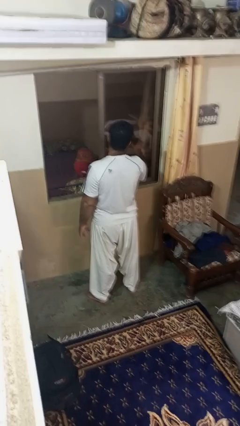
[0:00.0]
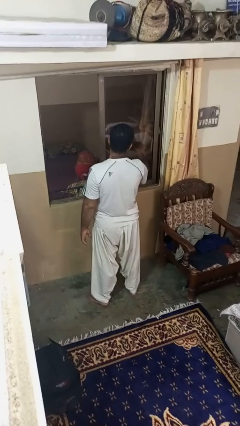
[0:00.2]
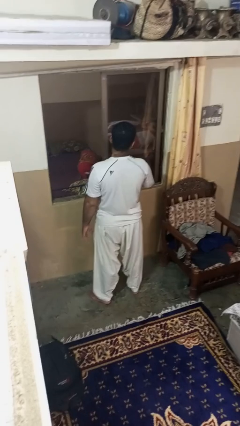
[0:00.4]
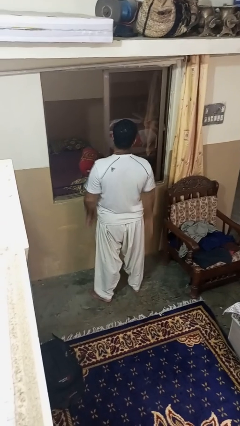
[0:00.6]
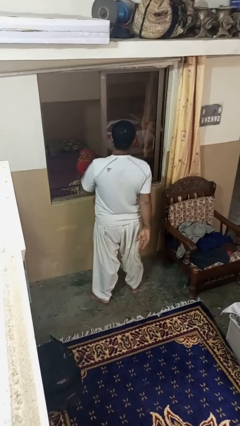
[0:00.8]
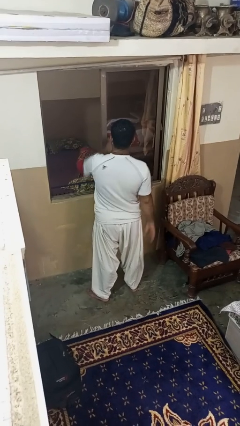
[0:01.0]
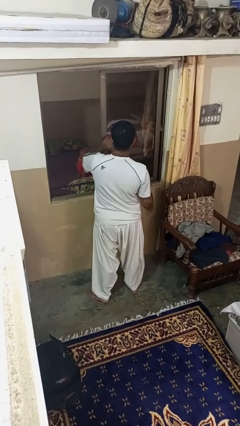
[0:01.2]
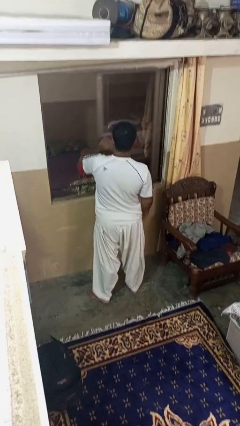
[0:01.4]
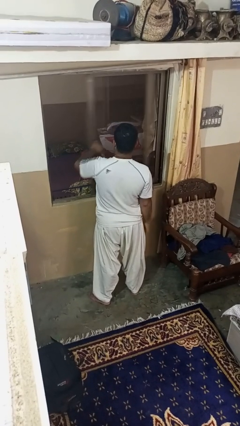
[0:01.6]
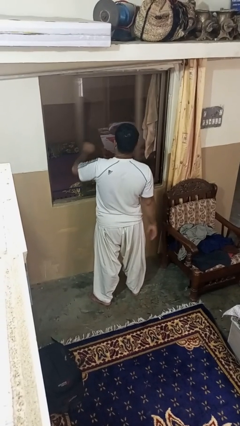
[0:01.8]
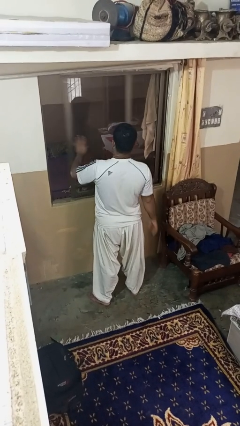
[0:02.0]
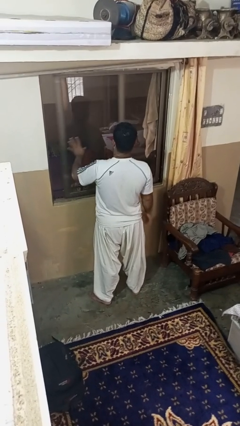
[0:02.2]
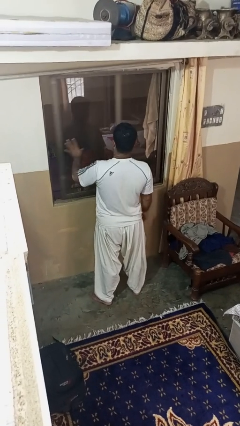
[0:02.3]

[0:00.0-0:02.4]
person closes home window

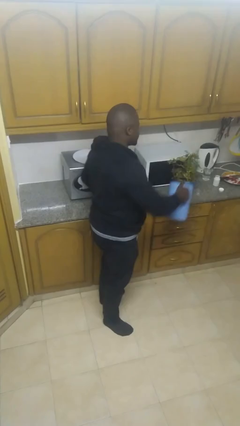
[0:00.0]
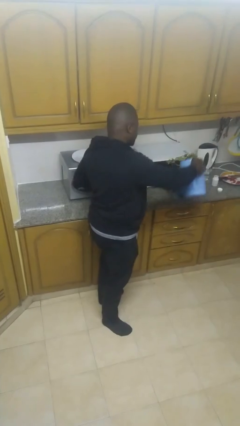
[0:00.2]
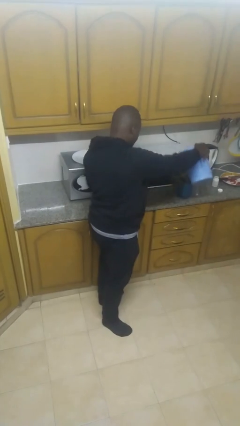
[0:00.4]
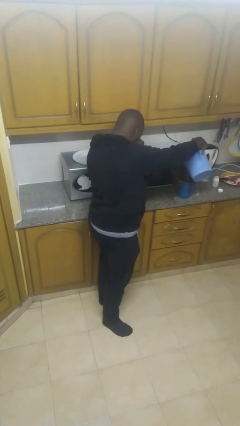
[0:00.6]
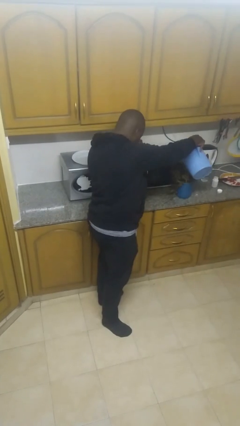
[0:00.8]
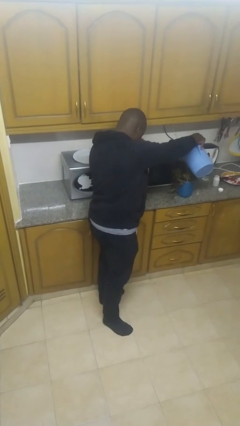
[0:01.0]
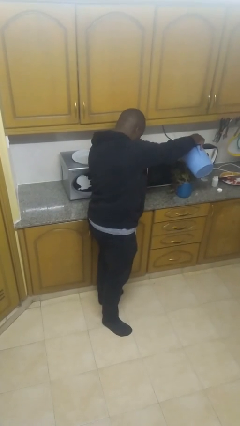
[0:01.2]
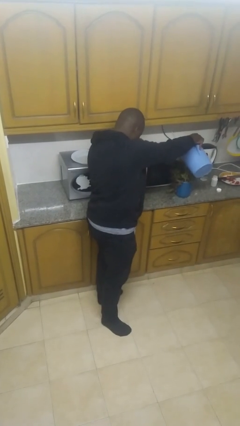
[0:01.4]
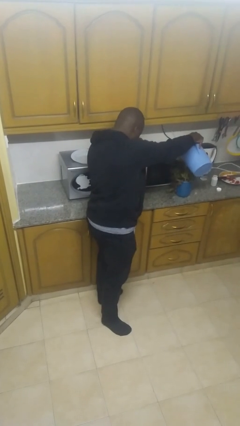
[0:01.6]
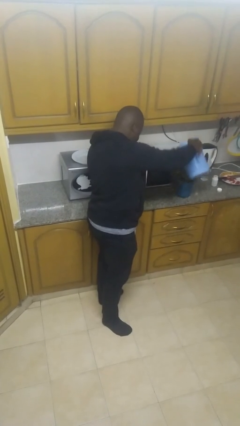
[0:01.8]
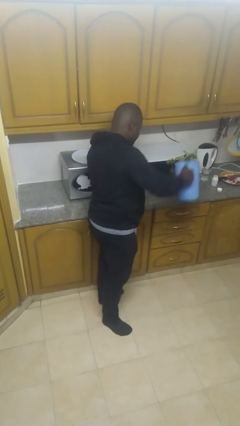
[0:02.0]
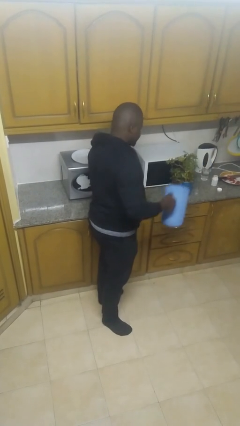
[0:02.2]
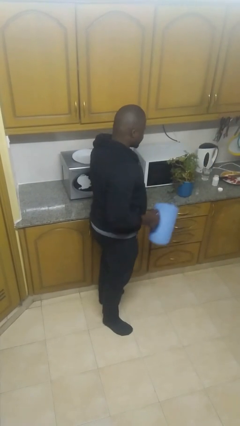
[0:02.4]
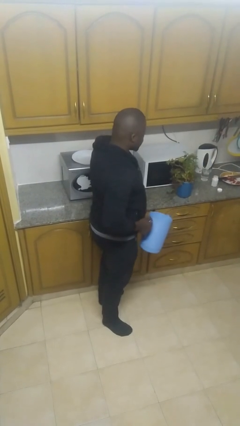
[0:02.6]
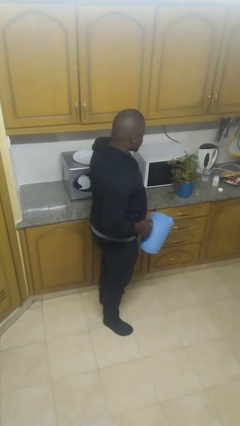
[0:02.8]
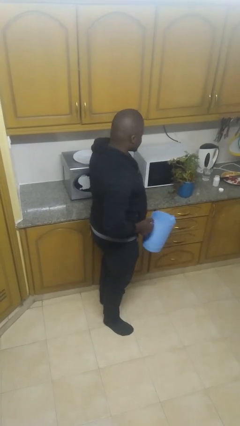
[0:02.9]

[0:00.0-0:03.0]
person waters houseplant

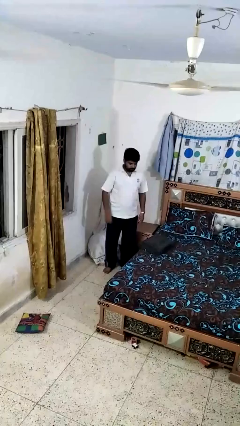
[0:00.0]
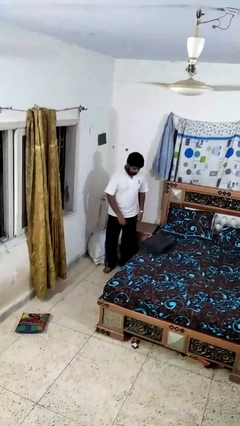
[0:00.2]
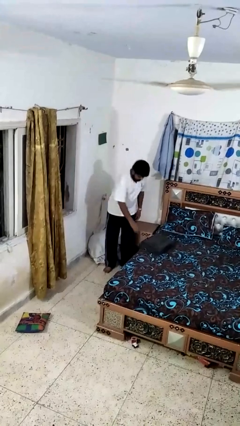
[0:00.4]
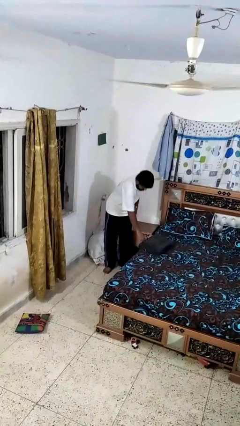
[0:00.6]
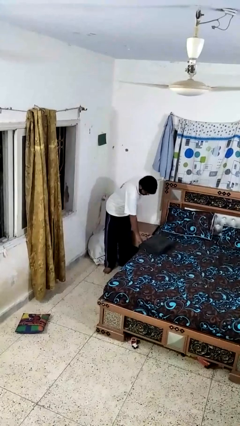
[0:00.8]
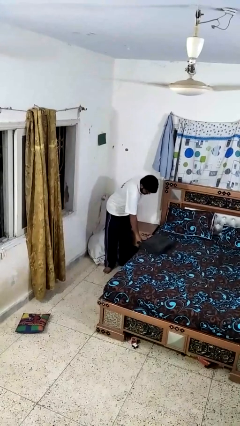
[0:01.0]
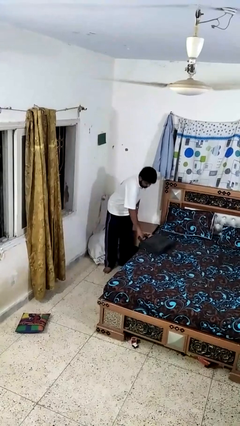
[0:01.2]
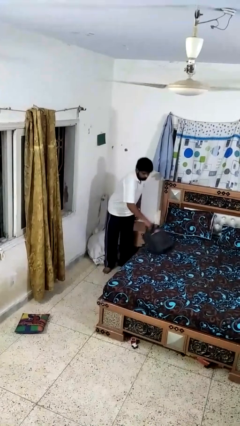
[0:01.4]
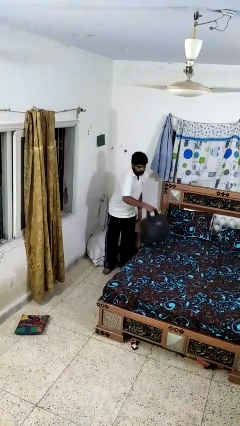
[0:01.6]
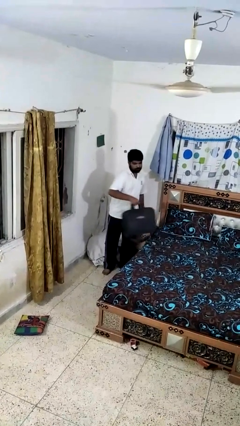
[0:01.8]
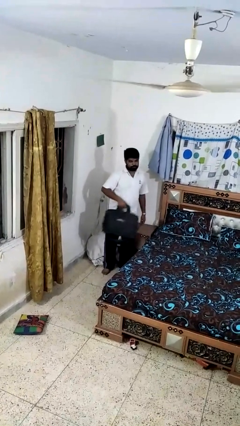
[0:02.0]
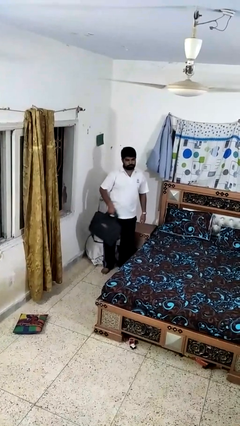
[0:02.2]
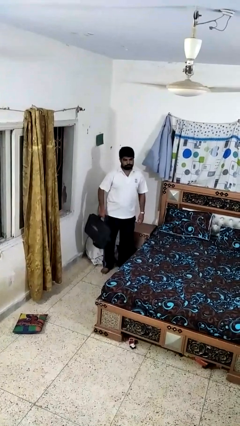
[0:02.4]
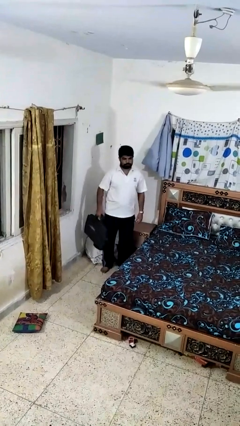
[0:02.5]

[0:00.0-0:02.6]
person picks up object from bed

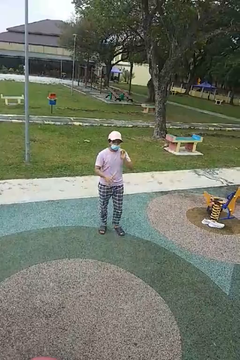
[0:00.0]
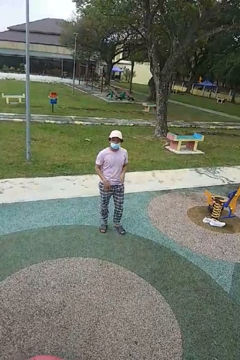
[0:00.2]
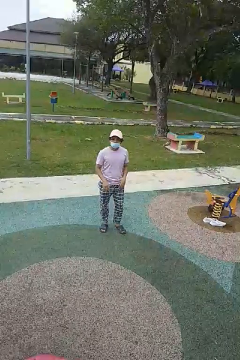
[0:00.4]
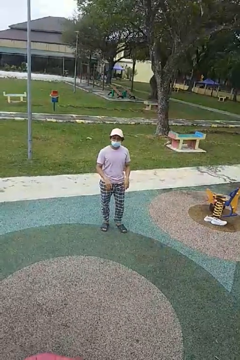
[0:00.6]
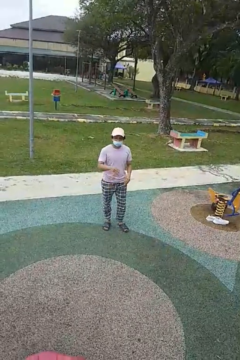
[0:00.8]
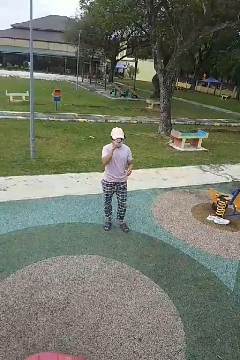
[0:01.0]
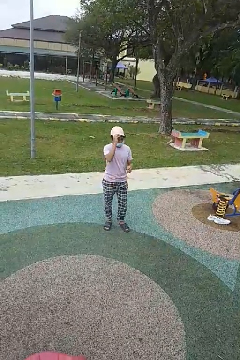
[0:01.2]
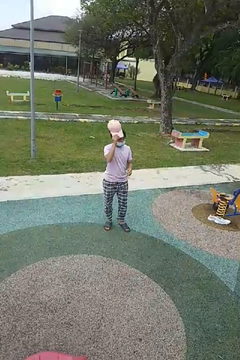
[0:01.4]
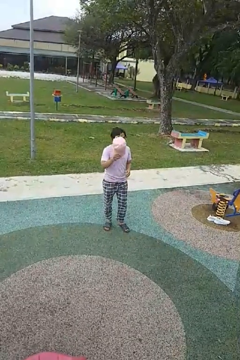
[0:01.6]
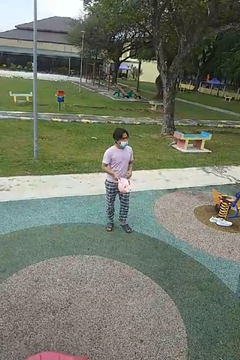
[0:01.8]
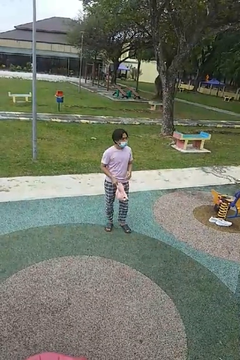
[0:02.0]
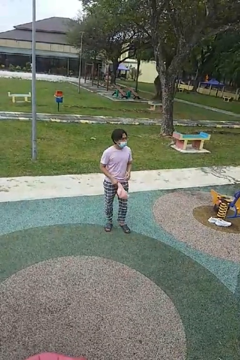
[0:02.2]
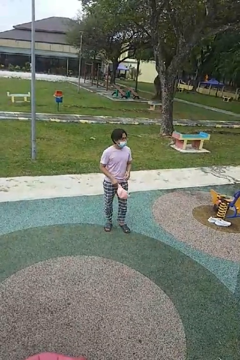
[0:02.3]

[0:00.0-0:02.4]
person takes off hat

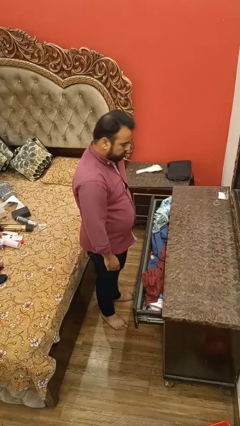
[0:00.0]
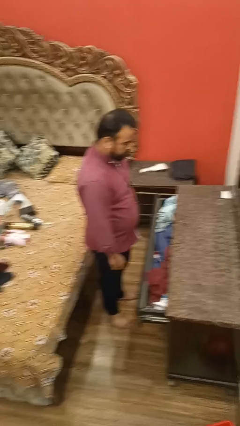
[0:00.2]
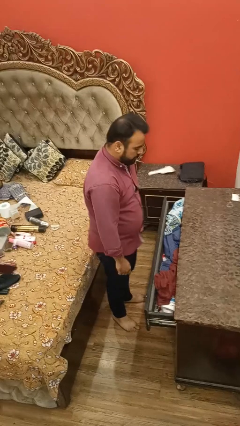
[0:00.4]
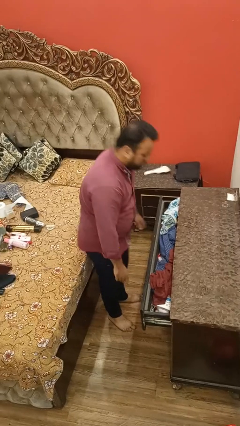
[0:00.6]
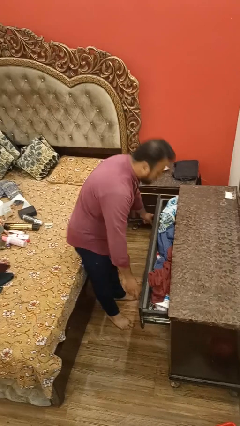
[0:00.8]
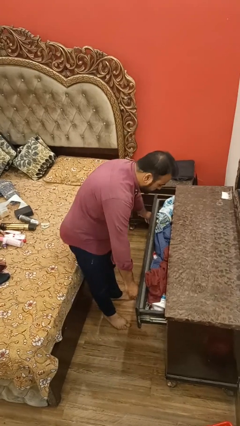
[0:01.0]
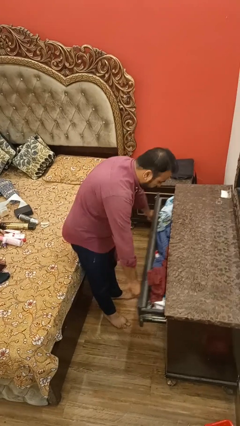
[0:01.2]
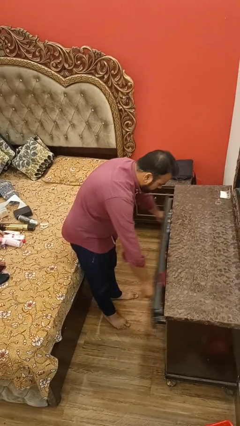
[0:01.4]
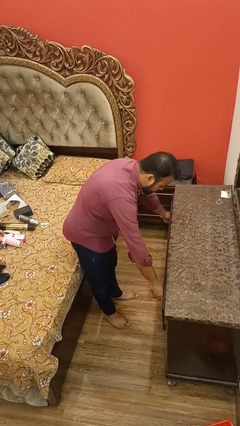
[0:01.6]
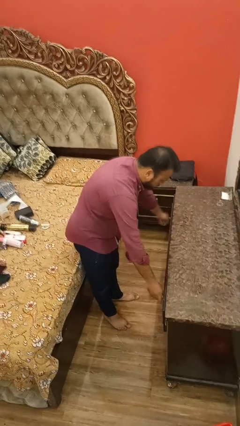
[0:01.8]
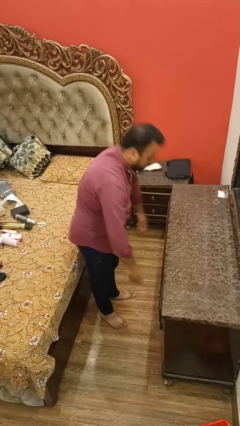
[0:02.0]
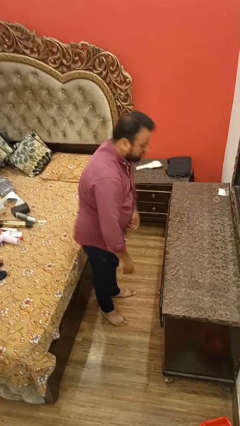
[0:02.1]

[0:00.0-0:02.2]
person closes dresser drawer

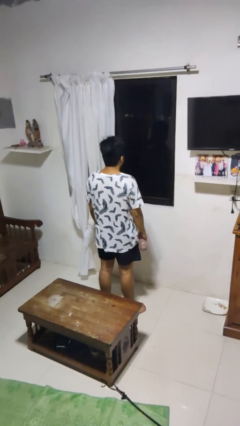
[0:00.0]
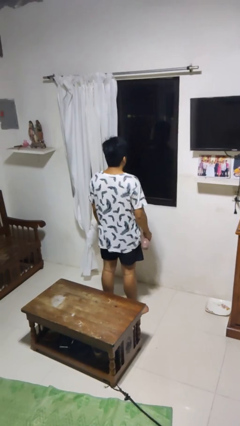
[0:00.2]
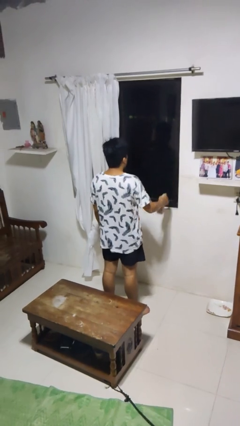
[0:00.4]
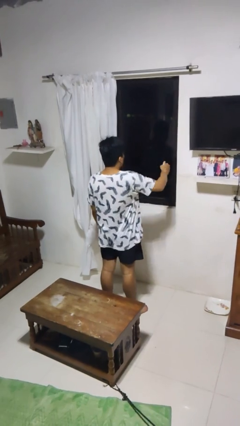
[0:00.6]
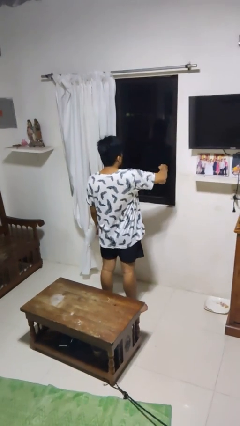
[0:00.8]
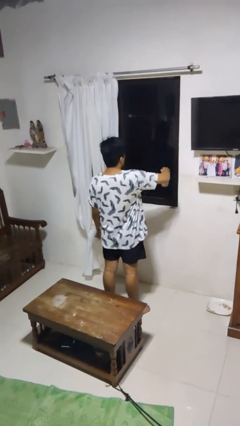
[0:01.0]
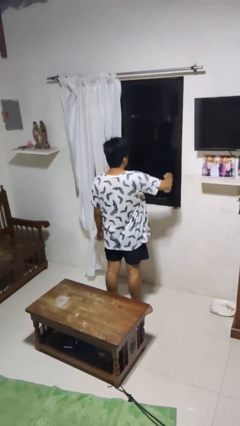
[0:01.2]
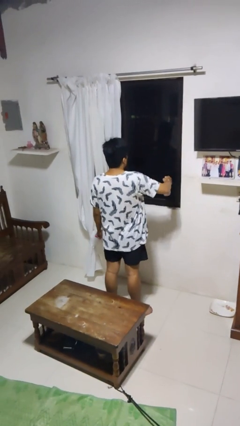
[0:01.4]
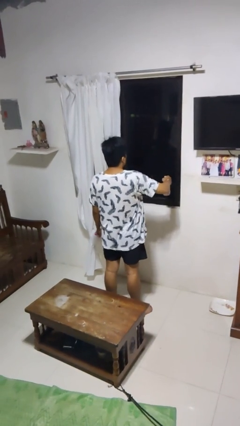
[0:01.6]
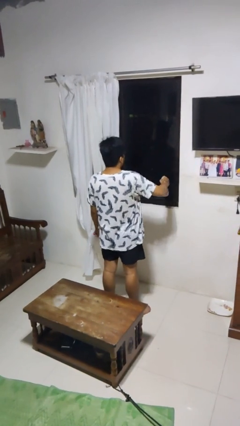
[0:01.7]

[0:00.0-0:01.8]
person sprays from bottle

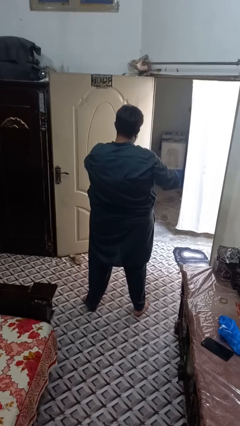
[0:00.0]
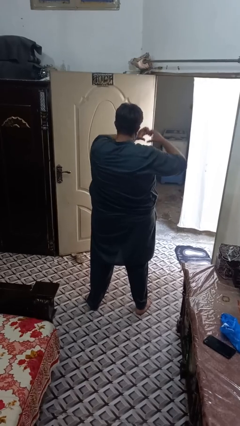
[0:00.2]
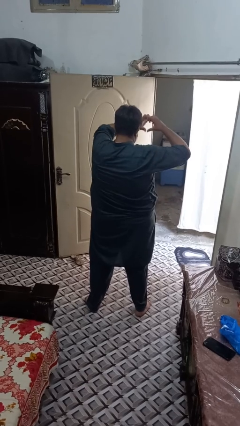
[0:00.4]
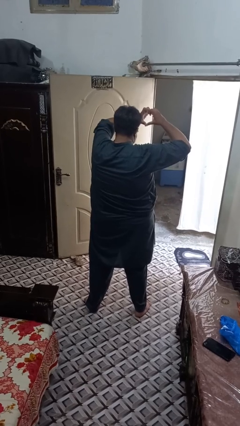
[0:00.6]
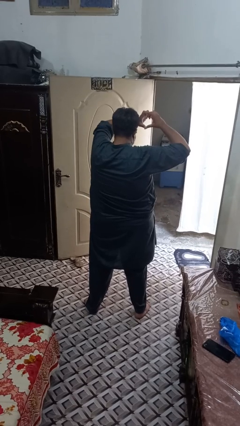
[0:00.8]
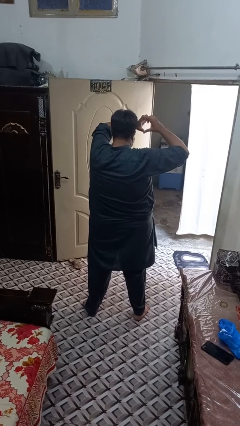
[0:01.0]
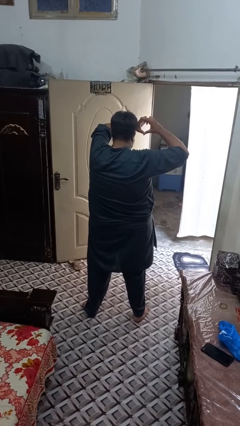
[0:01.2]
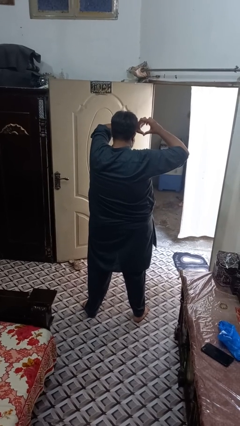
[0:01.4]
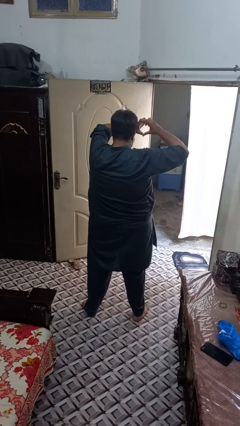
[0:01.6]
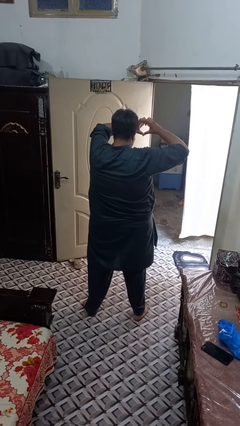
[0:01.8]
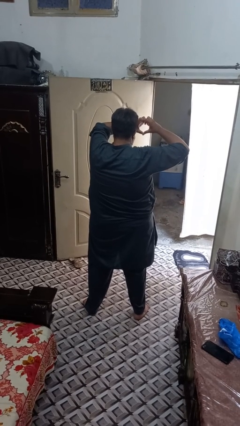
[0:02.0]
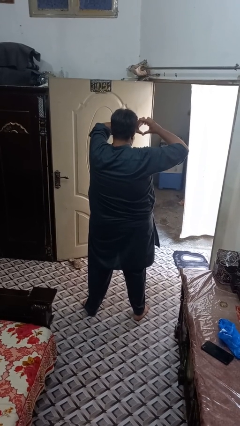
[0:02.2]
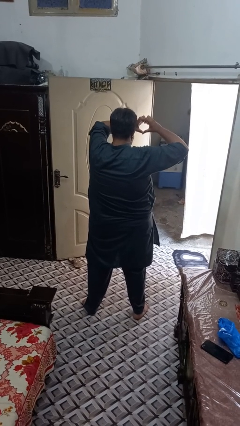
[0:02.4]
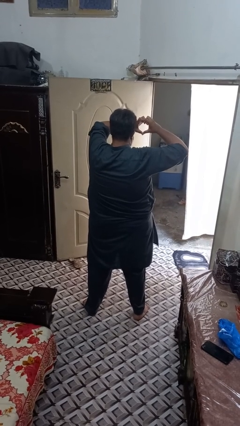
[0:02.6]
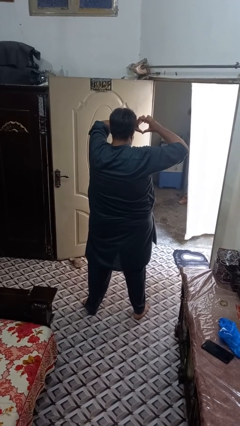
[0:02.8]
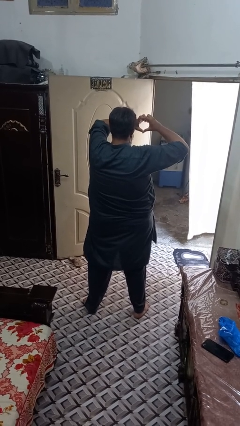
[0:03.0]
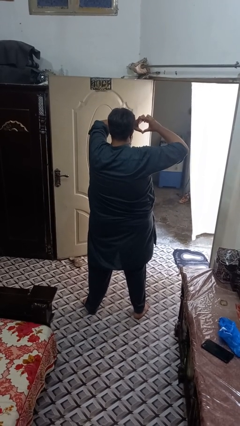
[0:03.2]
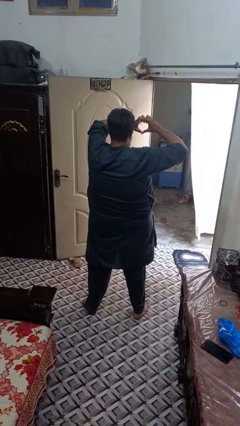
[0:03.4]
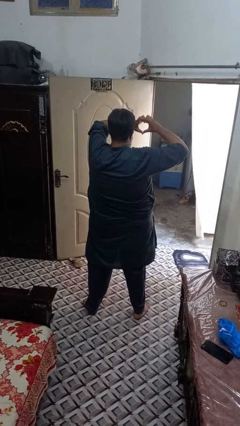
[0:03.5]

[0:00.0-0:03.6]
person gestures heart
